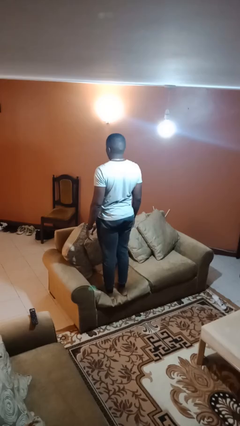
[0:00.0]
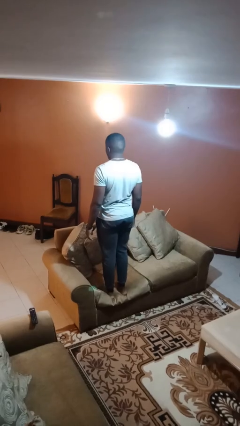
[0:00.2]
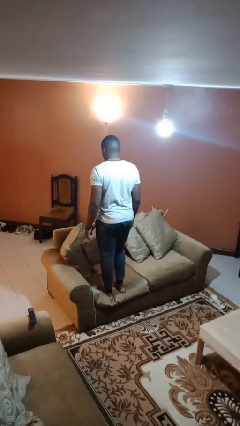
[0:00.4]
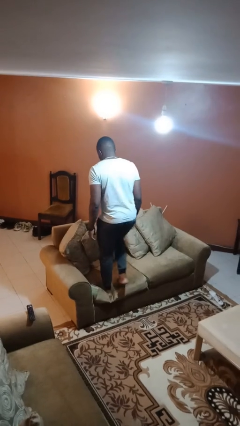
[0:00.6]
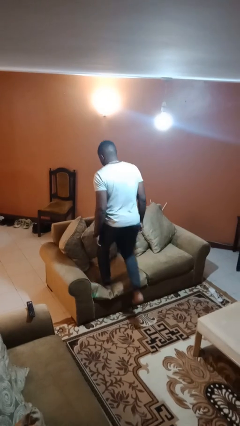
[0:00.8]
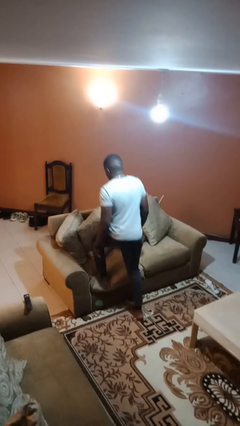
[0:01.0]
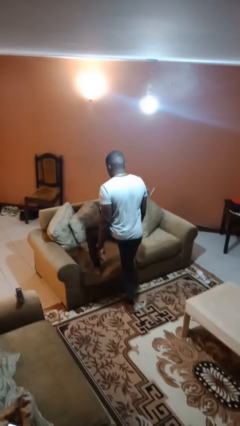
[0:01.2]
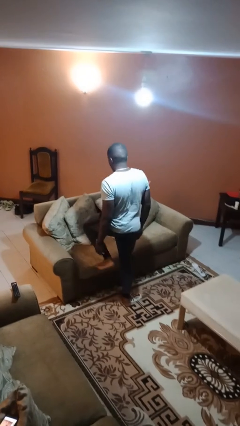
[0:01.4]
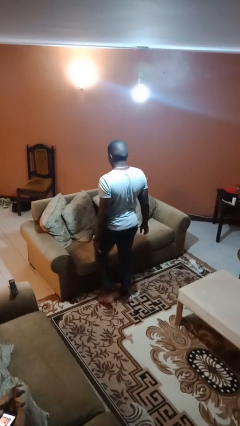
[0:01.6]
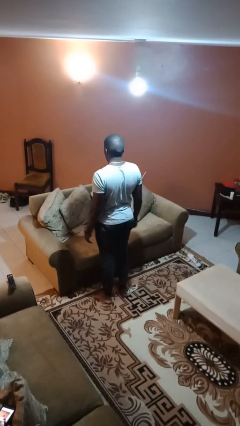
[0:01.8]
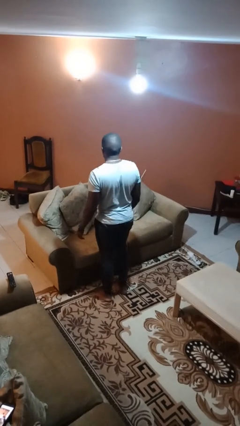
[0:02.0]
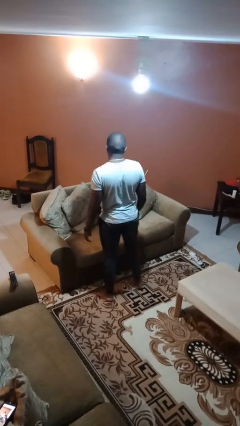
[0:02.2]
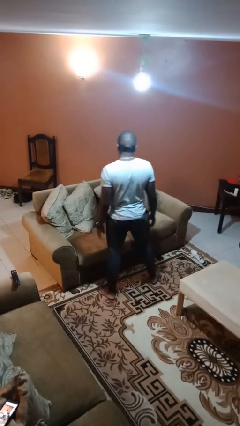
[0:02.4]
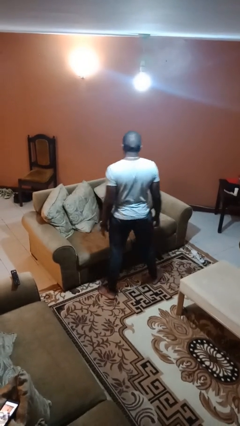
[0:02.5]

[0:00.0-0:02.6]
person climbs off couch

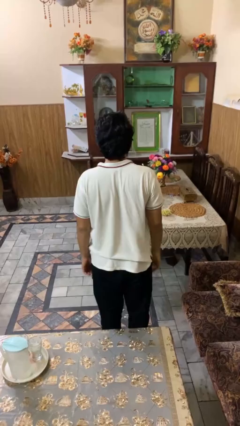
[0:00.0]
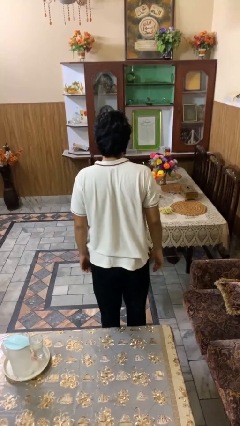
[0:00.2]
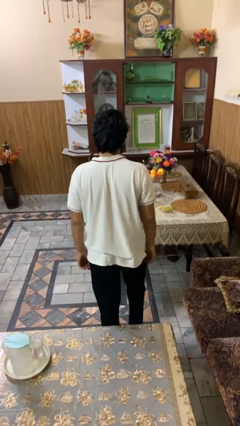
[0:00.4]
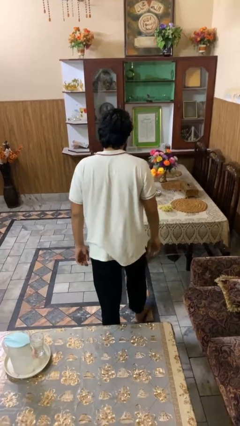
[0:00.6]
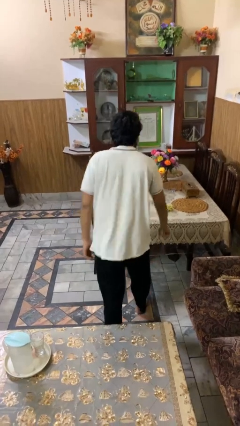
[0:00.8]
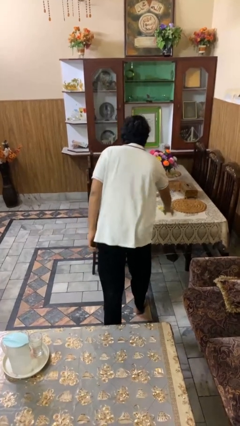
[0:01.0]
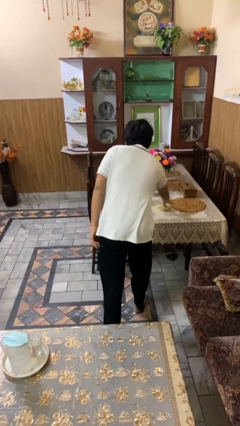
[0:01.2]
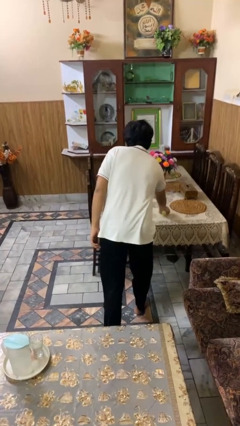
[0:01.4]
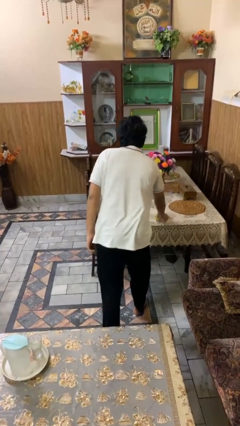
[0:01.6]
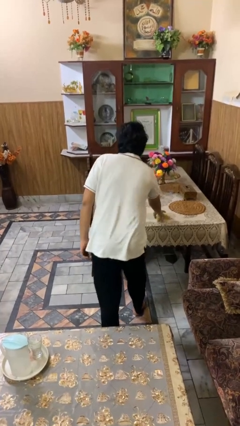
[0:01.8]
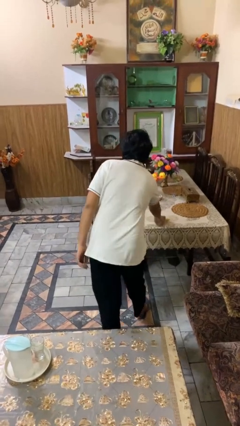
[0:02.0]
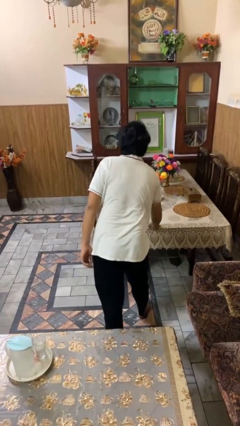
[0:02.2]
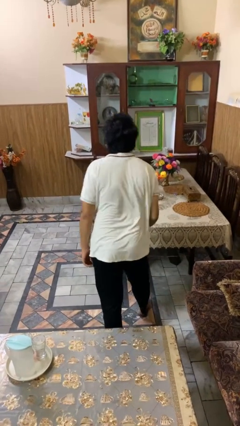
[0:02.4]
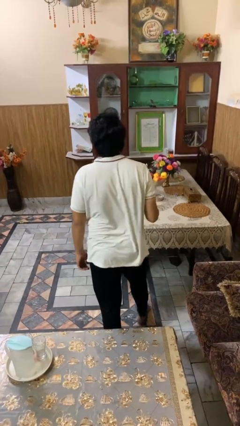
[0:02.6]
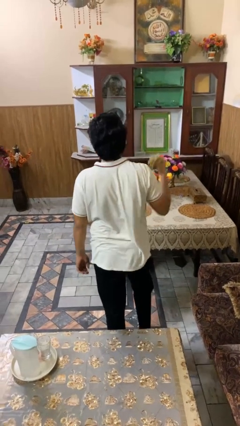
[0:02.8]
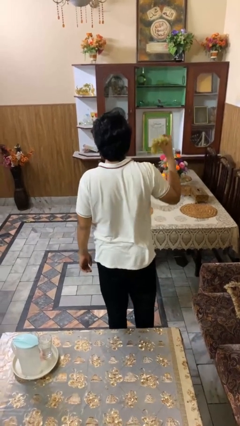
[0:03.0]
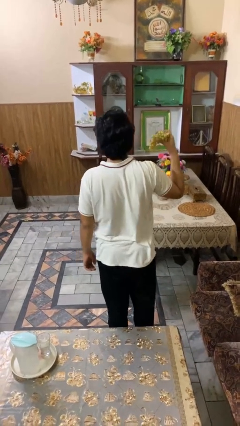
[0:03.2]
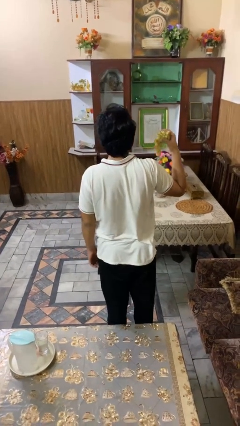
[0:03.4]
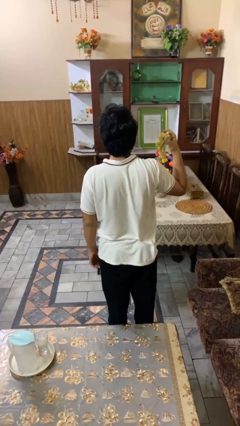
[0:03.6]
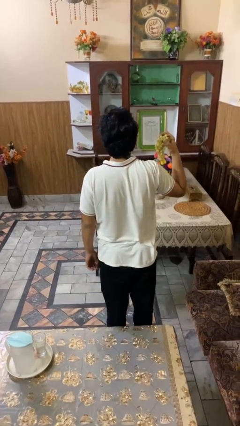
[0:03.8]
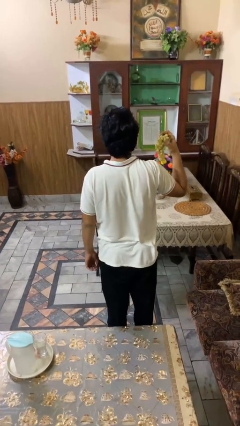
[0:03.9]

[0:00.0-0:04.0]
person picks up object from table

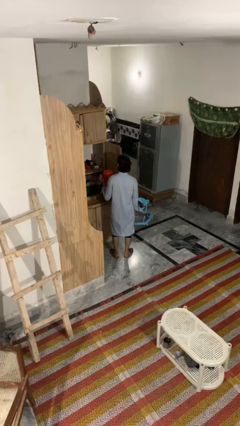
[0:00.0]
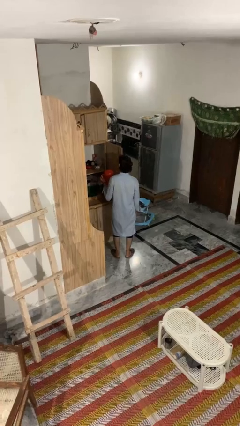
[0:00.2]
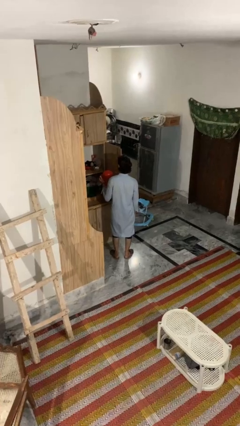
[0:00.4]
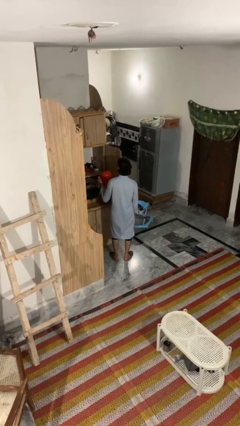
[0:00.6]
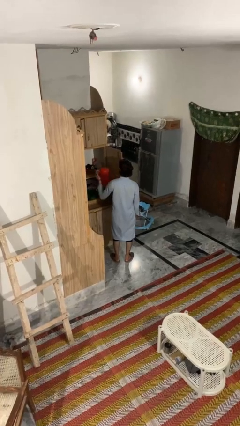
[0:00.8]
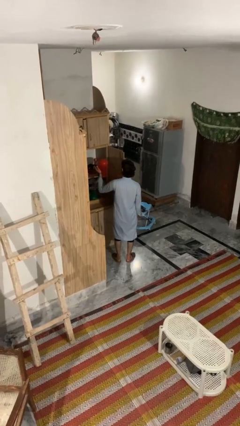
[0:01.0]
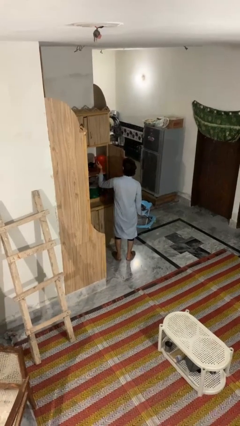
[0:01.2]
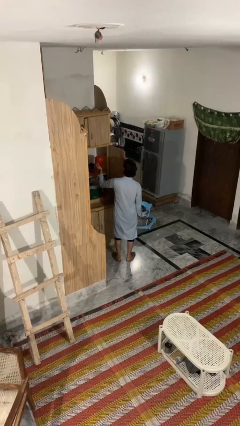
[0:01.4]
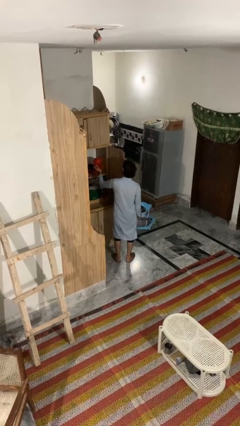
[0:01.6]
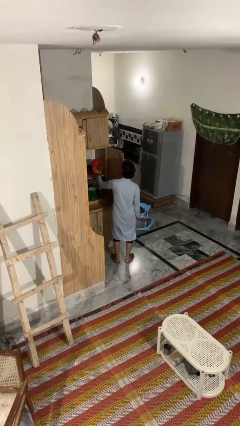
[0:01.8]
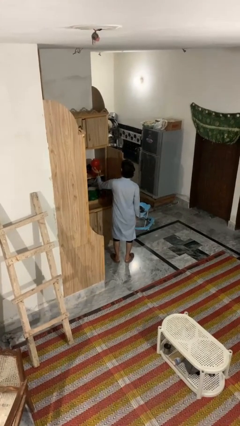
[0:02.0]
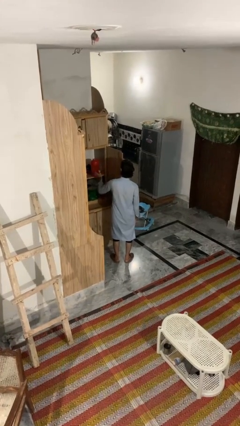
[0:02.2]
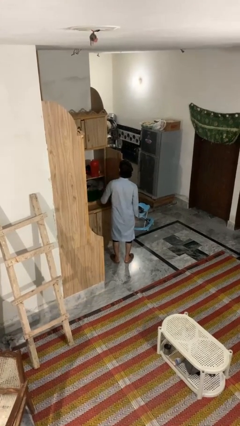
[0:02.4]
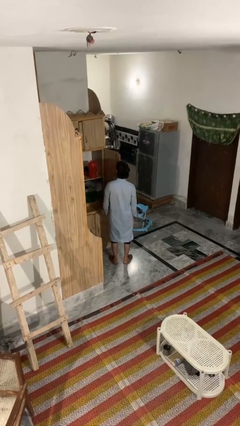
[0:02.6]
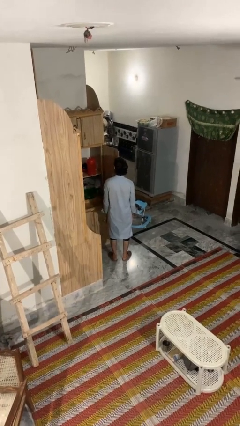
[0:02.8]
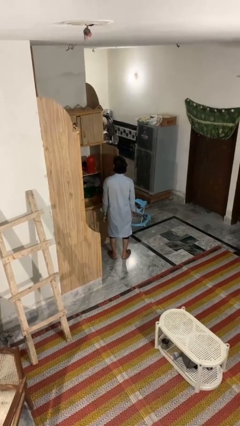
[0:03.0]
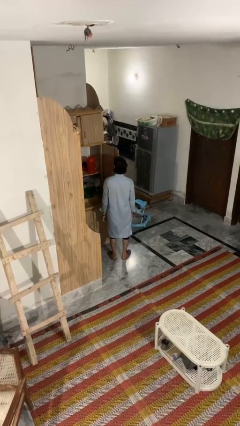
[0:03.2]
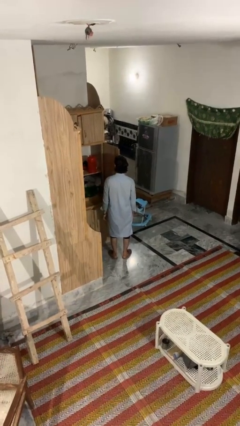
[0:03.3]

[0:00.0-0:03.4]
person puts down object into cabinet

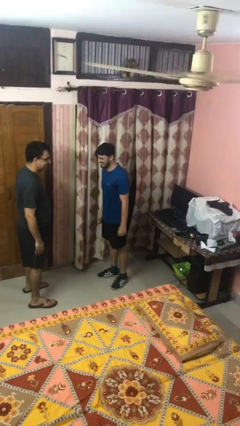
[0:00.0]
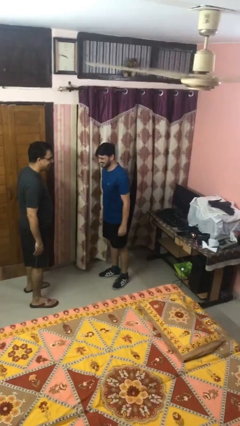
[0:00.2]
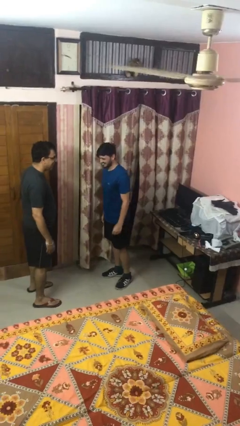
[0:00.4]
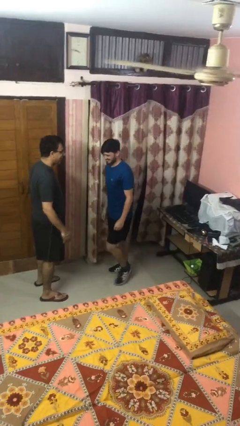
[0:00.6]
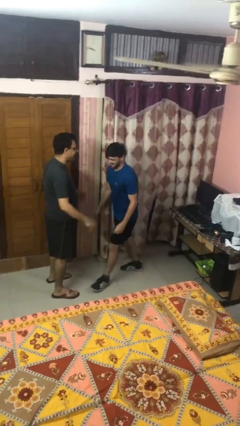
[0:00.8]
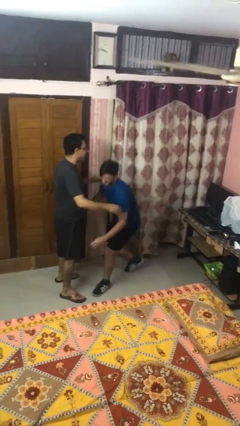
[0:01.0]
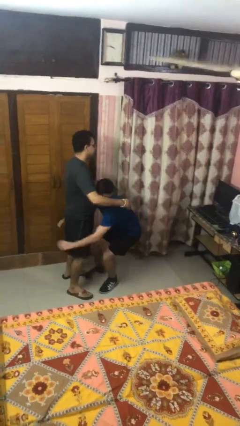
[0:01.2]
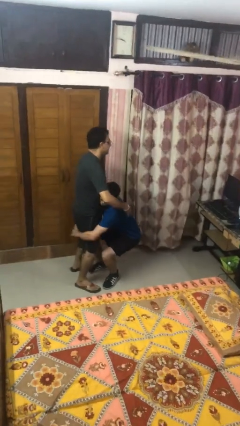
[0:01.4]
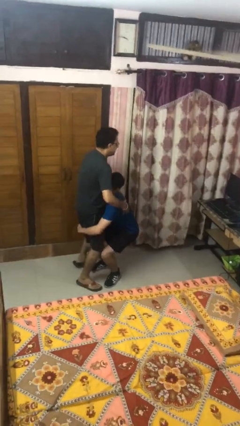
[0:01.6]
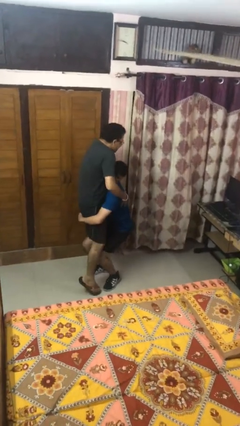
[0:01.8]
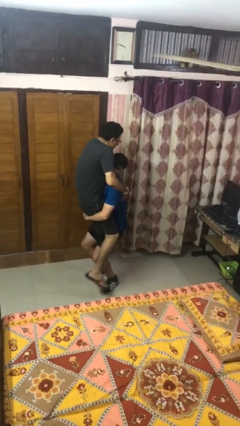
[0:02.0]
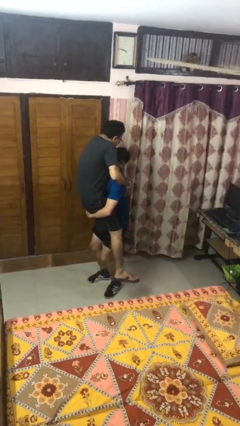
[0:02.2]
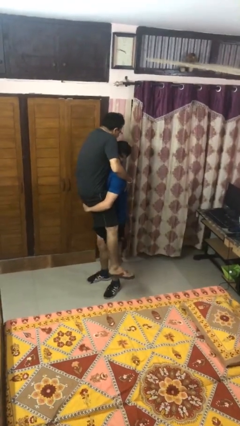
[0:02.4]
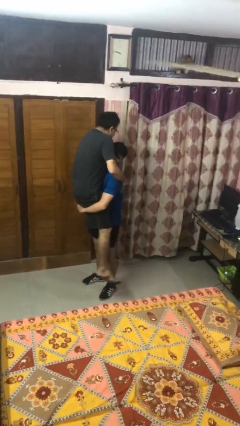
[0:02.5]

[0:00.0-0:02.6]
person picks up person

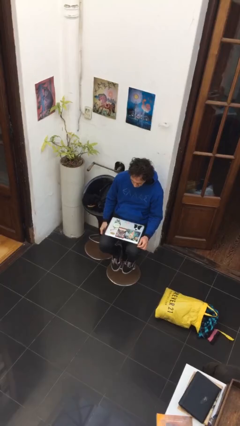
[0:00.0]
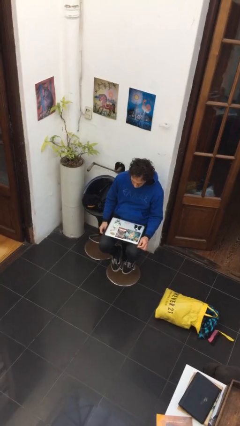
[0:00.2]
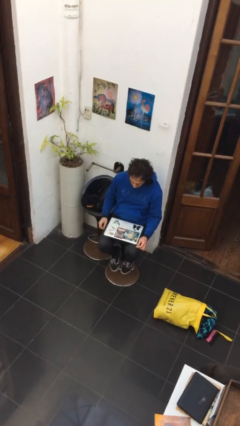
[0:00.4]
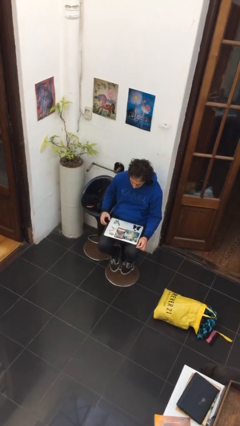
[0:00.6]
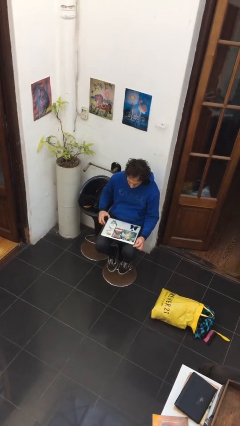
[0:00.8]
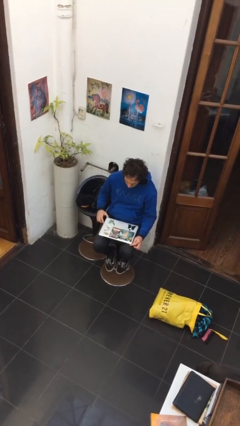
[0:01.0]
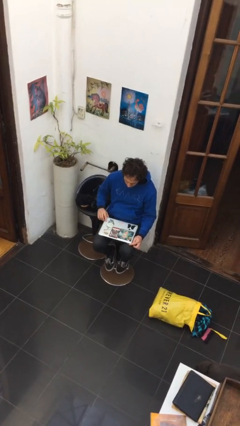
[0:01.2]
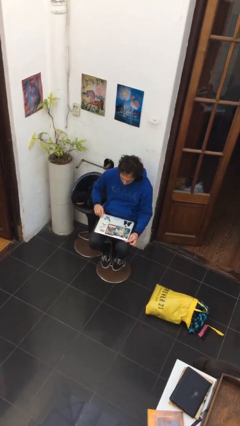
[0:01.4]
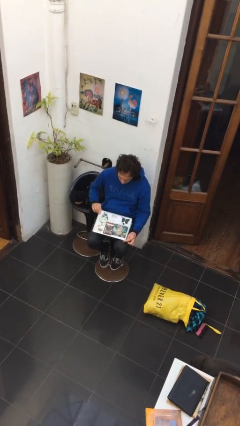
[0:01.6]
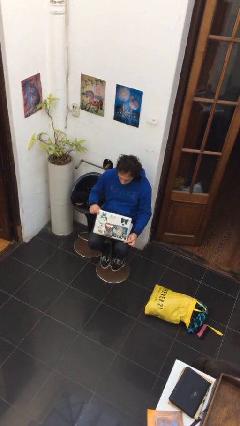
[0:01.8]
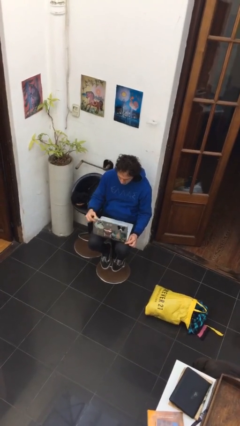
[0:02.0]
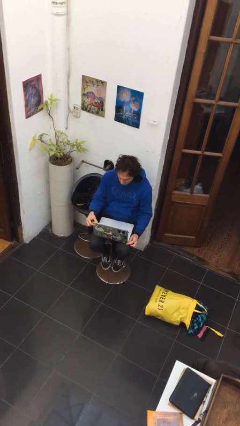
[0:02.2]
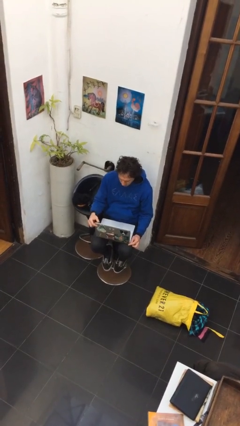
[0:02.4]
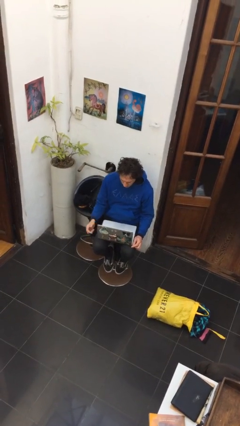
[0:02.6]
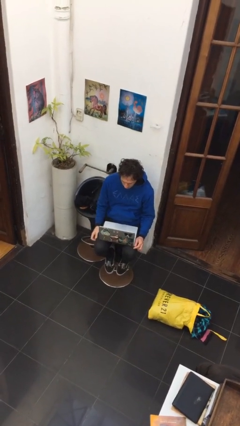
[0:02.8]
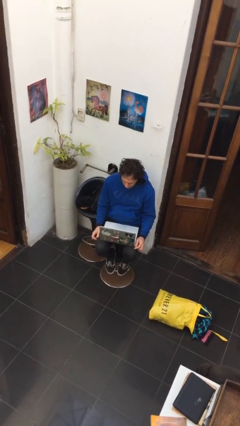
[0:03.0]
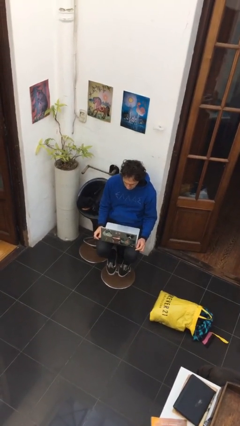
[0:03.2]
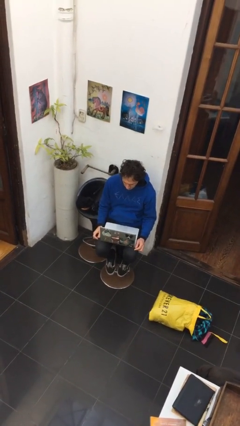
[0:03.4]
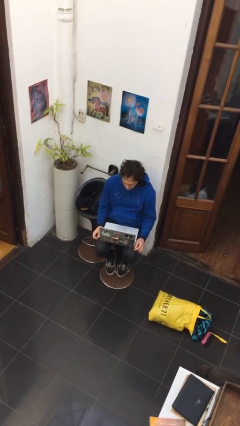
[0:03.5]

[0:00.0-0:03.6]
person opens laptop

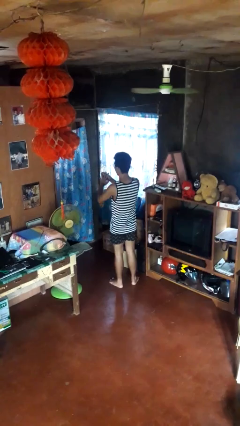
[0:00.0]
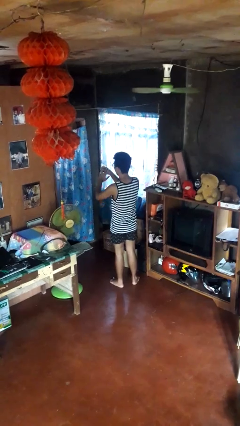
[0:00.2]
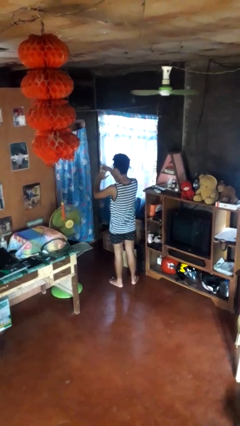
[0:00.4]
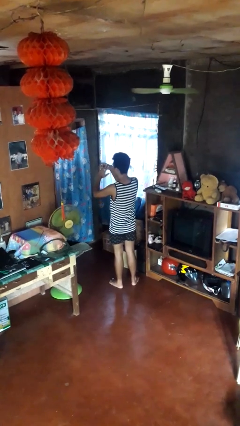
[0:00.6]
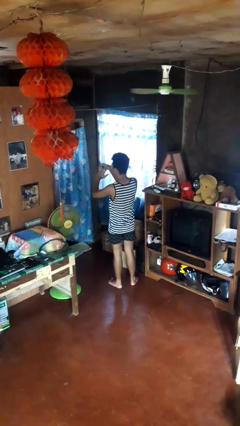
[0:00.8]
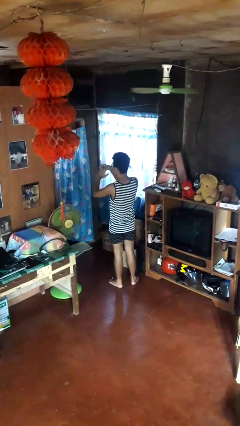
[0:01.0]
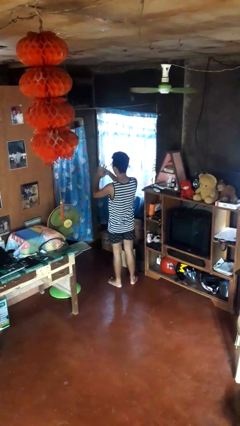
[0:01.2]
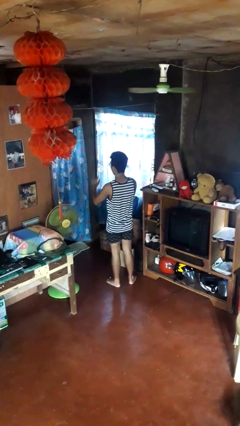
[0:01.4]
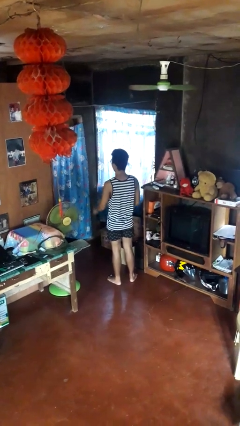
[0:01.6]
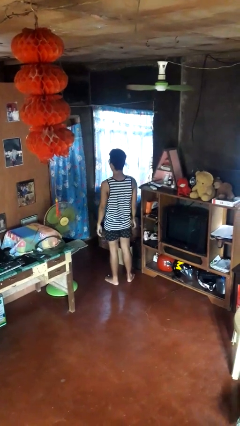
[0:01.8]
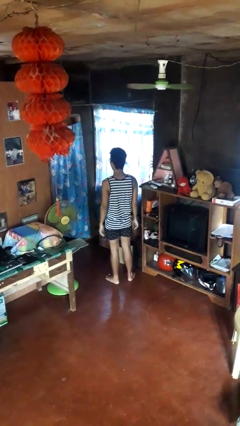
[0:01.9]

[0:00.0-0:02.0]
person puts on ring
